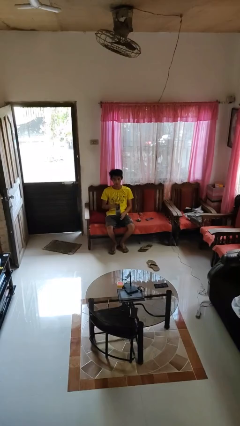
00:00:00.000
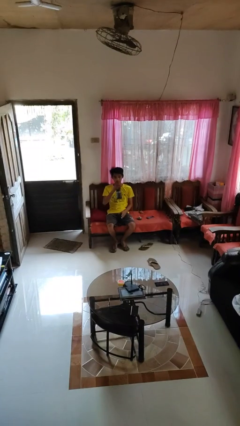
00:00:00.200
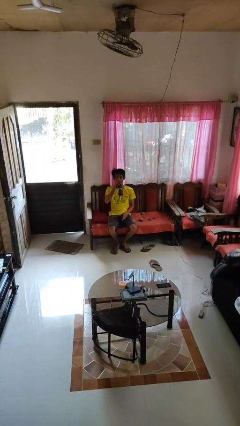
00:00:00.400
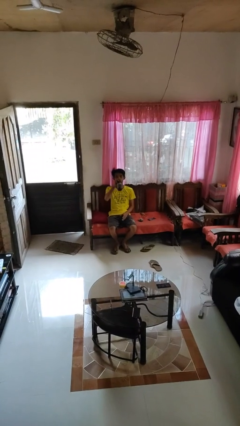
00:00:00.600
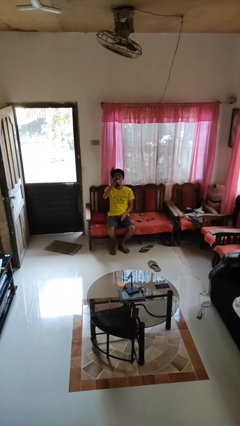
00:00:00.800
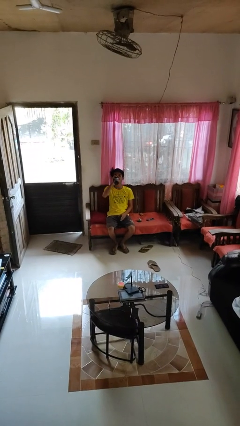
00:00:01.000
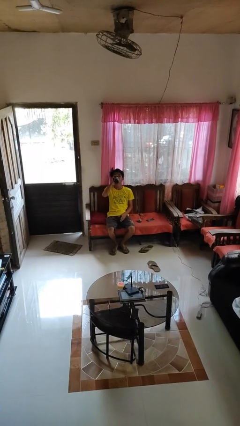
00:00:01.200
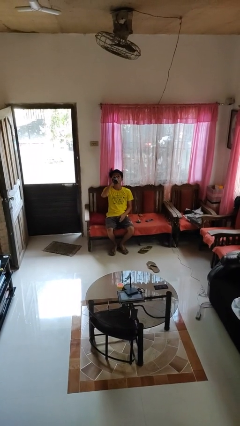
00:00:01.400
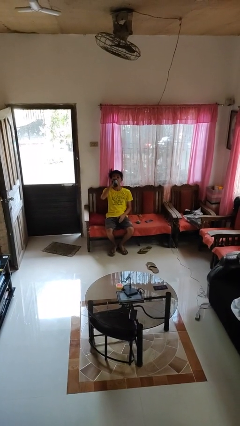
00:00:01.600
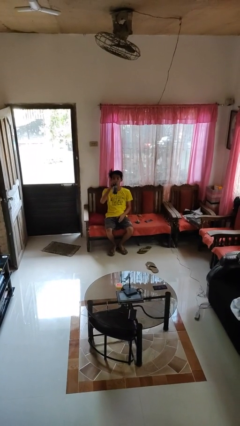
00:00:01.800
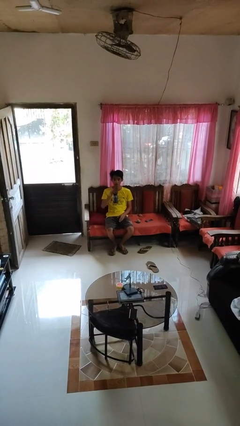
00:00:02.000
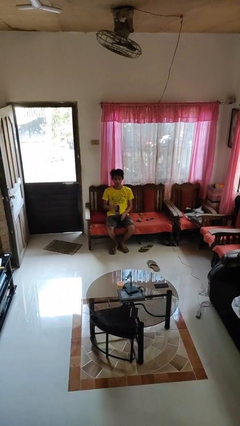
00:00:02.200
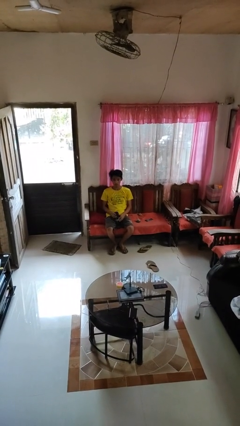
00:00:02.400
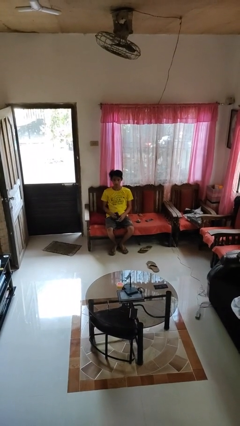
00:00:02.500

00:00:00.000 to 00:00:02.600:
person drinks from bottle

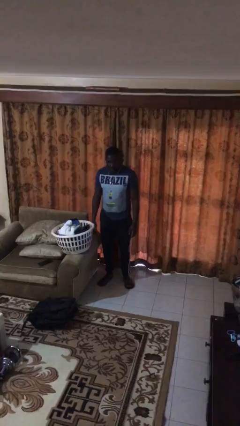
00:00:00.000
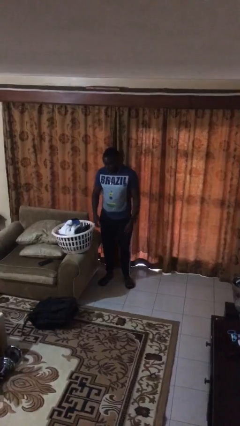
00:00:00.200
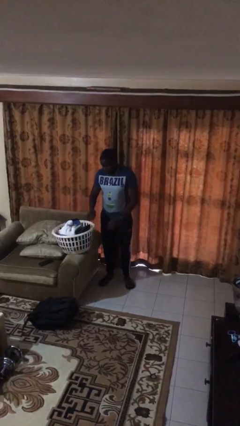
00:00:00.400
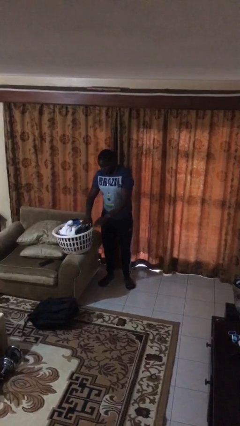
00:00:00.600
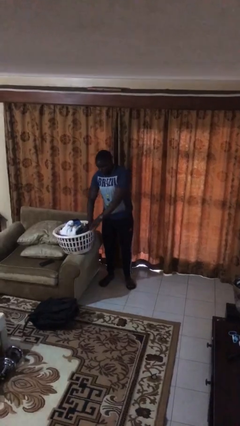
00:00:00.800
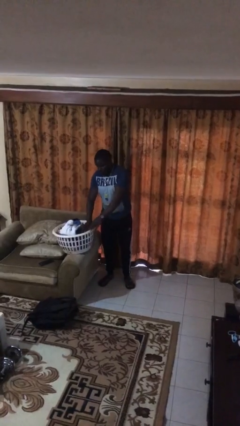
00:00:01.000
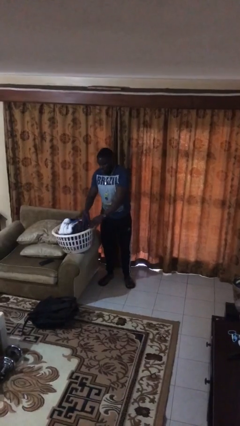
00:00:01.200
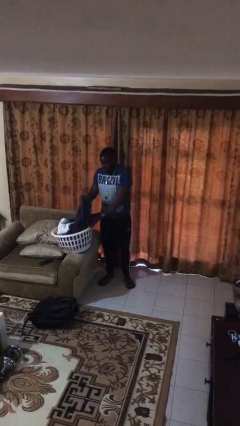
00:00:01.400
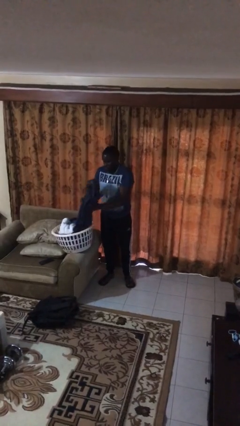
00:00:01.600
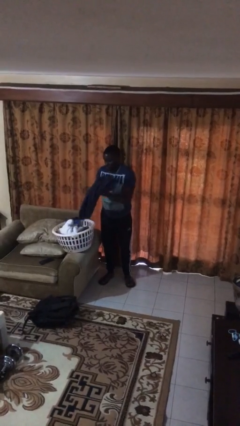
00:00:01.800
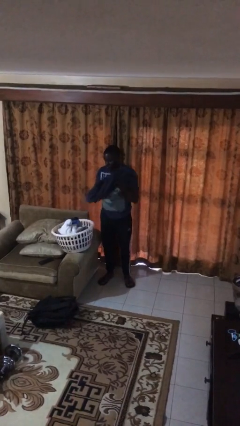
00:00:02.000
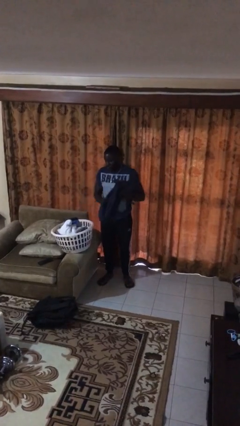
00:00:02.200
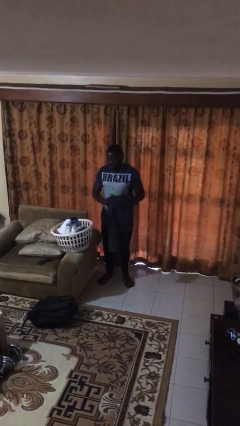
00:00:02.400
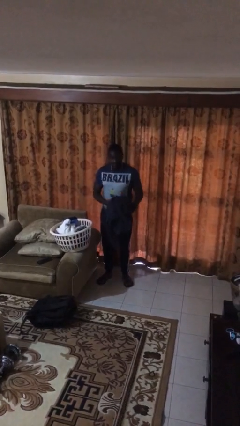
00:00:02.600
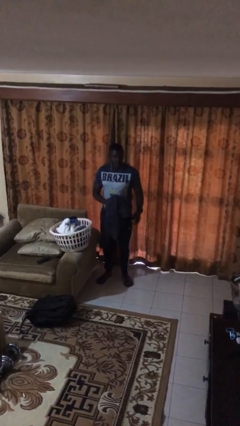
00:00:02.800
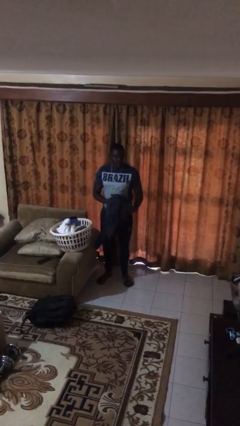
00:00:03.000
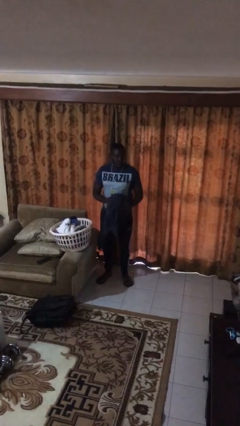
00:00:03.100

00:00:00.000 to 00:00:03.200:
person takes object from basket

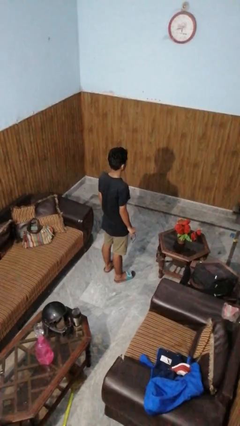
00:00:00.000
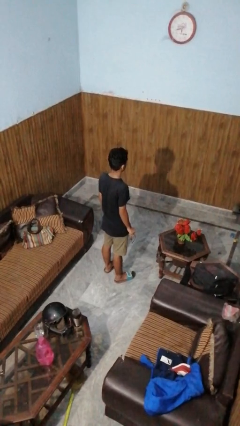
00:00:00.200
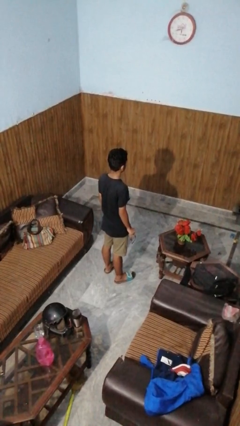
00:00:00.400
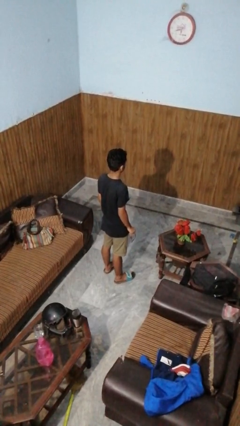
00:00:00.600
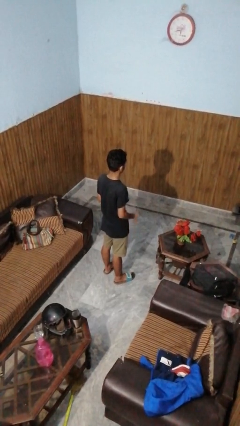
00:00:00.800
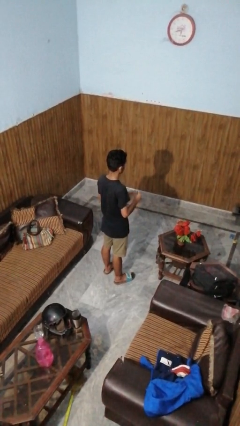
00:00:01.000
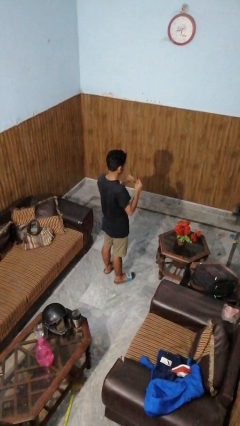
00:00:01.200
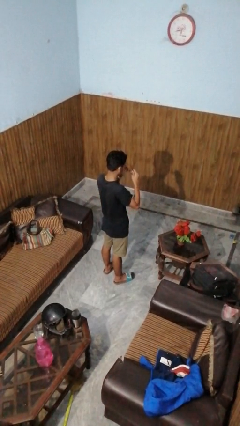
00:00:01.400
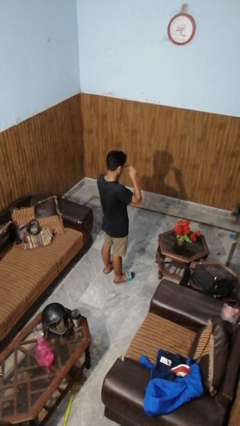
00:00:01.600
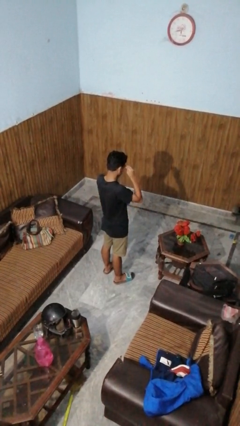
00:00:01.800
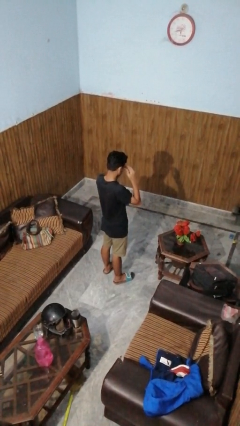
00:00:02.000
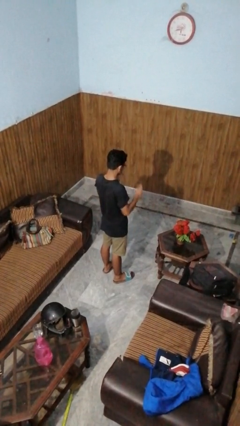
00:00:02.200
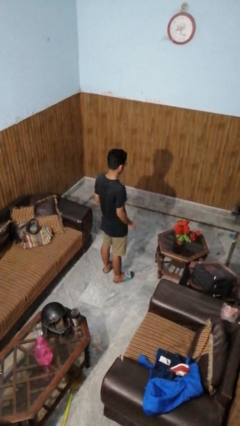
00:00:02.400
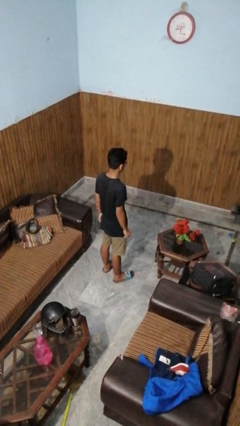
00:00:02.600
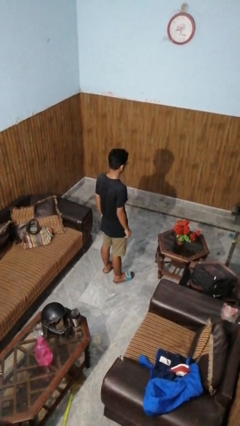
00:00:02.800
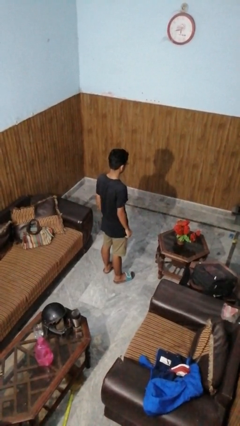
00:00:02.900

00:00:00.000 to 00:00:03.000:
person puts on glasses

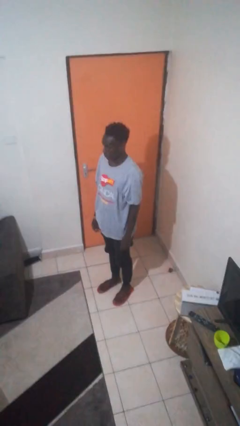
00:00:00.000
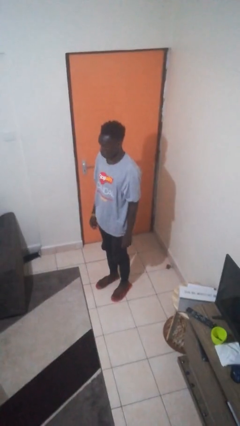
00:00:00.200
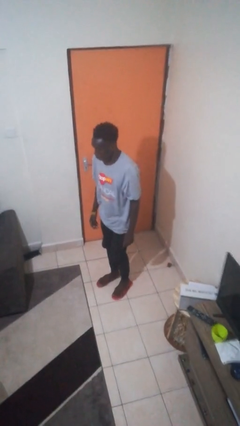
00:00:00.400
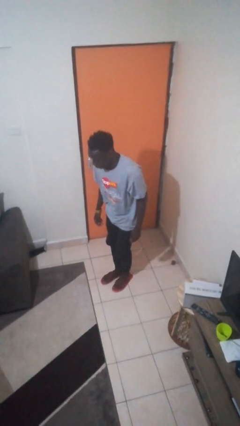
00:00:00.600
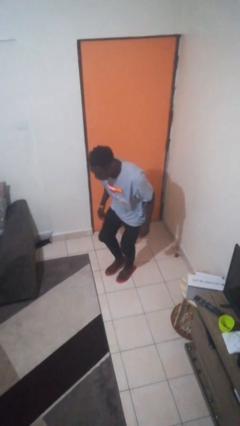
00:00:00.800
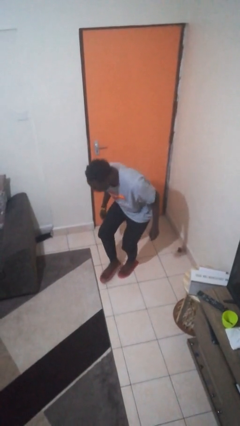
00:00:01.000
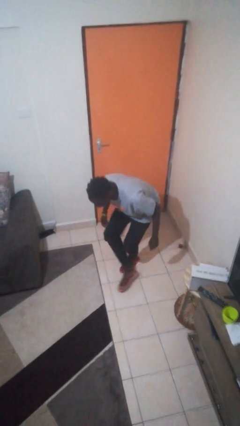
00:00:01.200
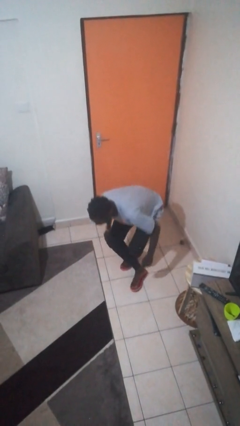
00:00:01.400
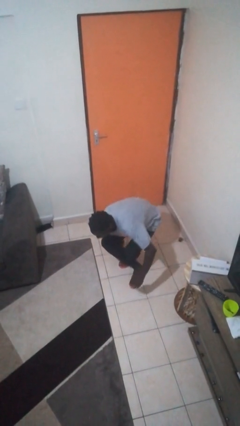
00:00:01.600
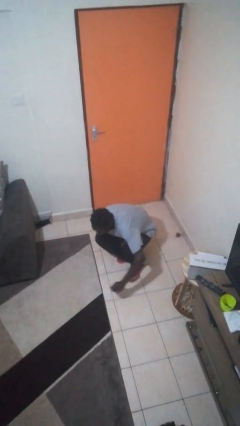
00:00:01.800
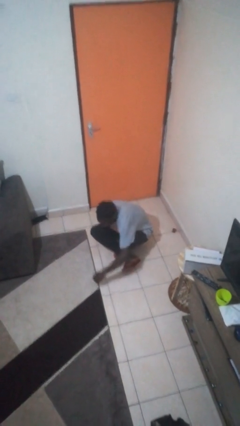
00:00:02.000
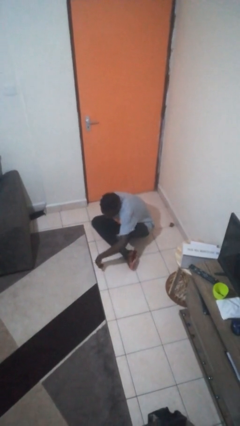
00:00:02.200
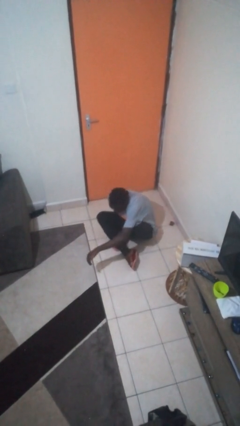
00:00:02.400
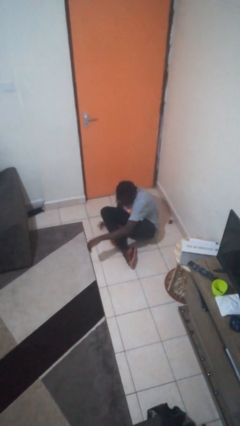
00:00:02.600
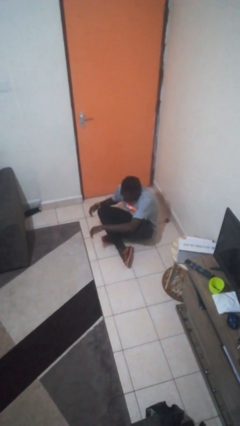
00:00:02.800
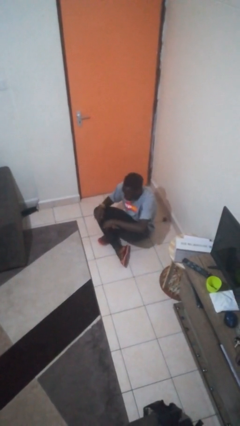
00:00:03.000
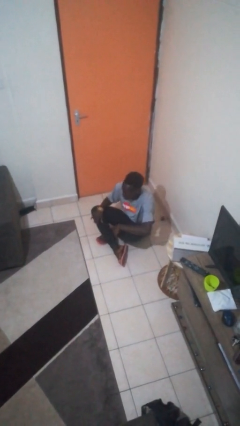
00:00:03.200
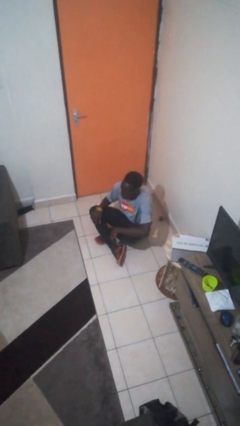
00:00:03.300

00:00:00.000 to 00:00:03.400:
person sits crisscross

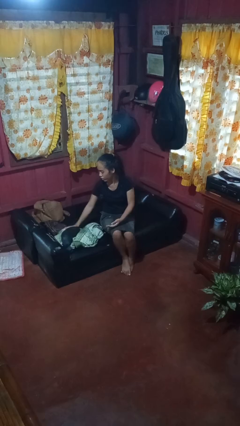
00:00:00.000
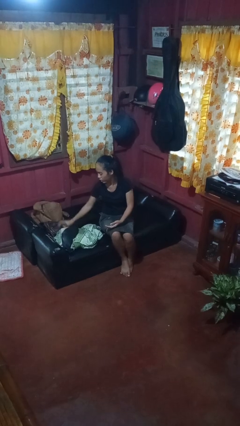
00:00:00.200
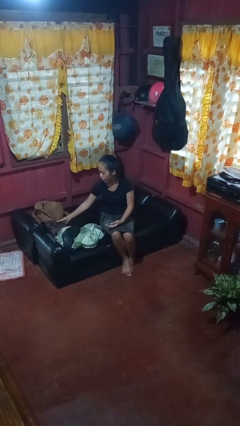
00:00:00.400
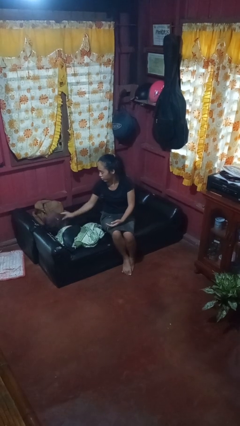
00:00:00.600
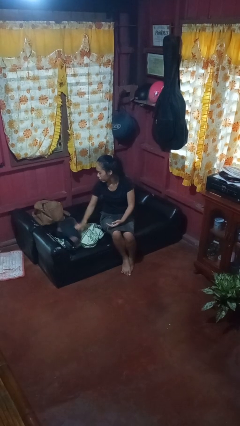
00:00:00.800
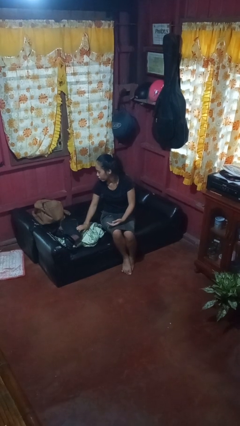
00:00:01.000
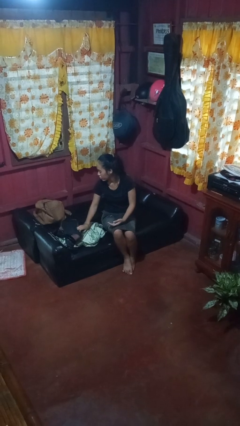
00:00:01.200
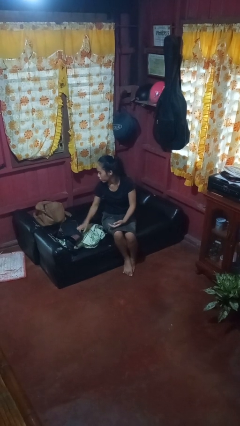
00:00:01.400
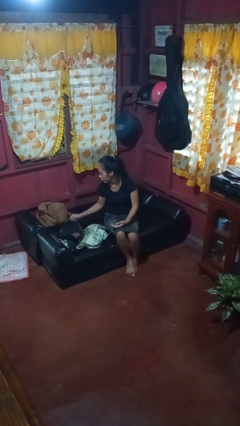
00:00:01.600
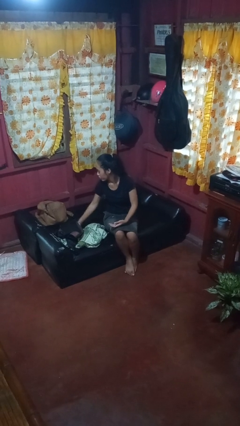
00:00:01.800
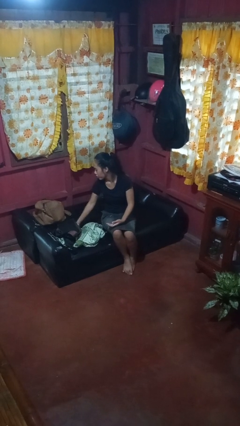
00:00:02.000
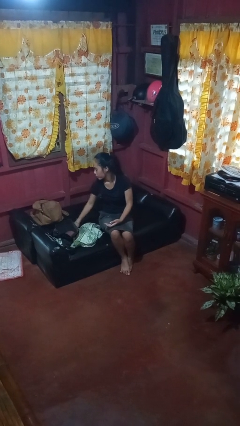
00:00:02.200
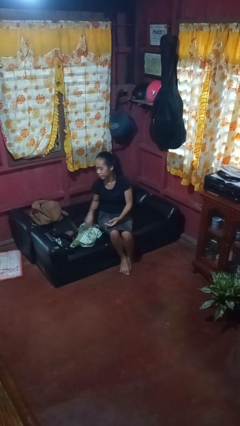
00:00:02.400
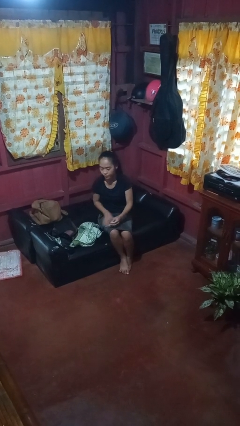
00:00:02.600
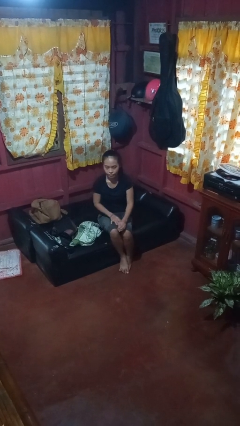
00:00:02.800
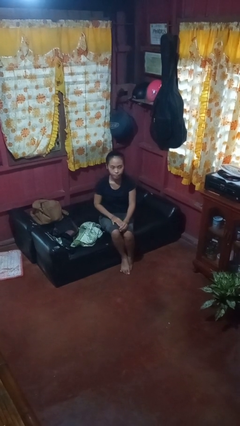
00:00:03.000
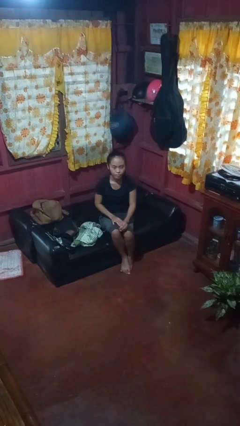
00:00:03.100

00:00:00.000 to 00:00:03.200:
person searches in couch

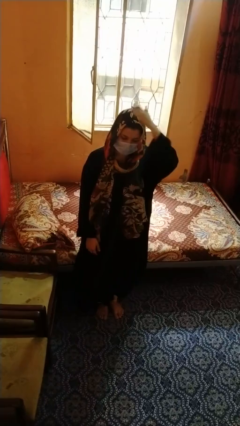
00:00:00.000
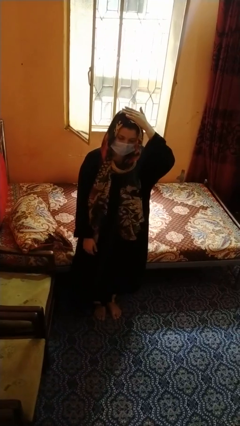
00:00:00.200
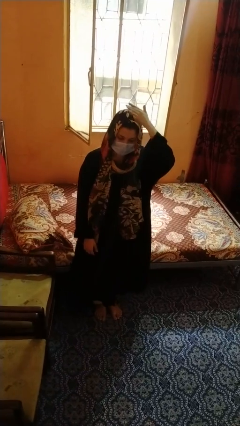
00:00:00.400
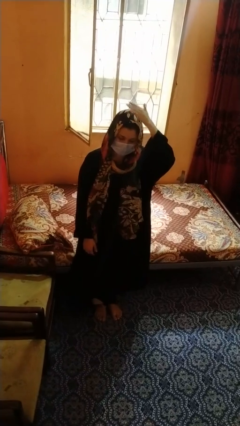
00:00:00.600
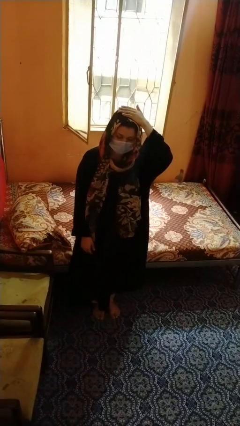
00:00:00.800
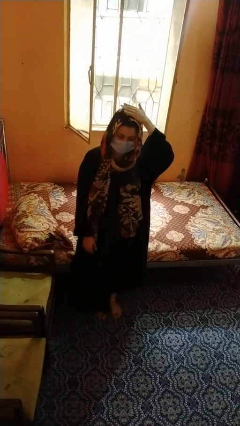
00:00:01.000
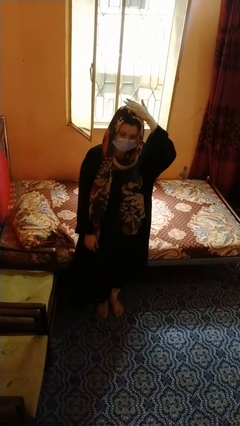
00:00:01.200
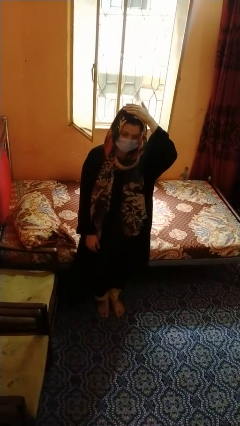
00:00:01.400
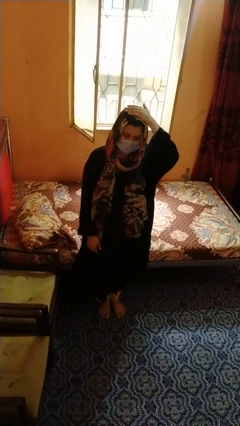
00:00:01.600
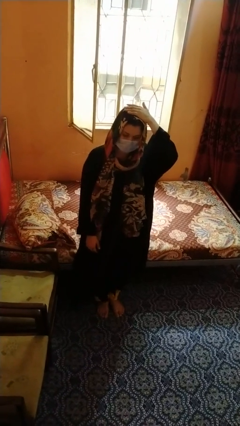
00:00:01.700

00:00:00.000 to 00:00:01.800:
person pats head

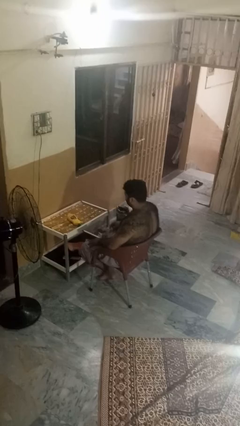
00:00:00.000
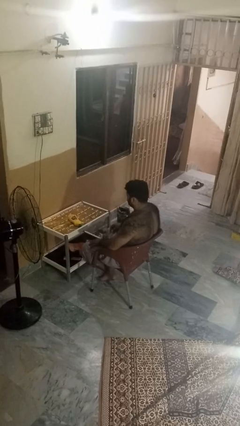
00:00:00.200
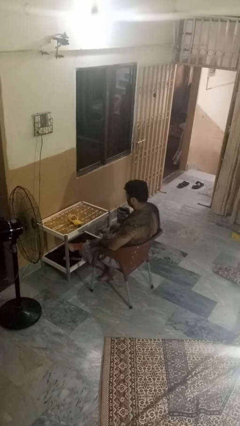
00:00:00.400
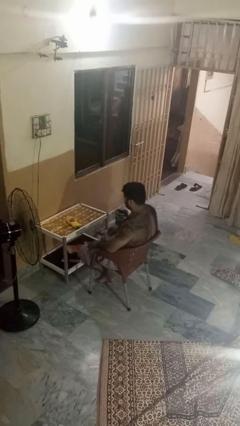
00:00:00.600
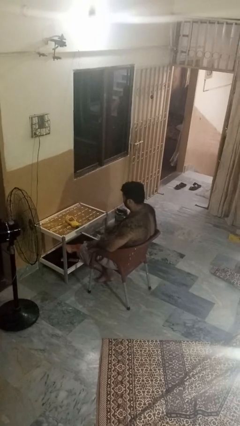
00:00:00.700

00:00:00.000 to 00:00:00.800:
person throws object on table
